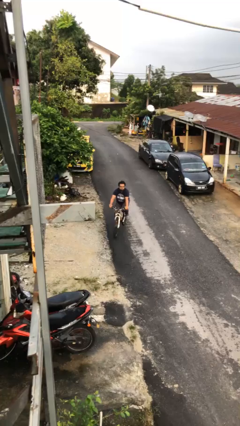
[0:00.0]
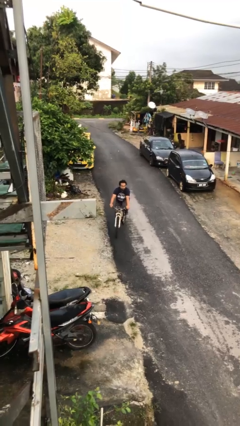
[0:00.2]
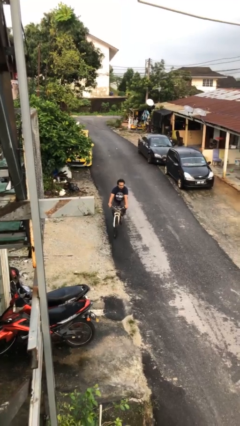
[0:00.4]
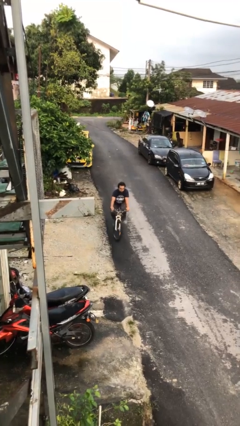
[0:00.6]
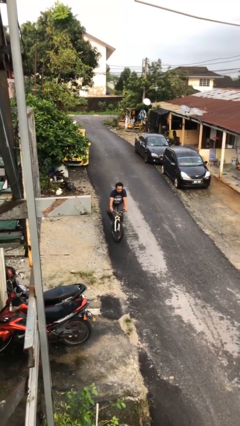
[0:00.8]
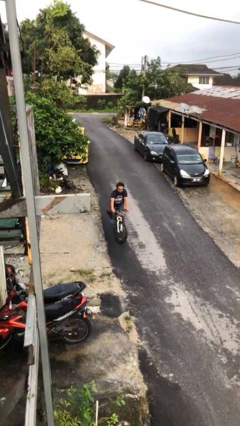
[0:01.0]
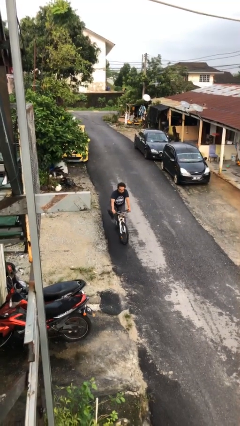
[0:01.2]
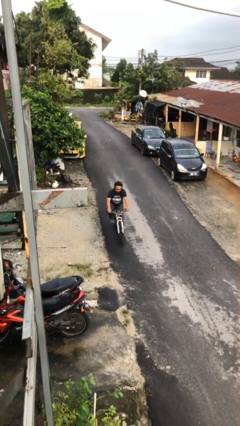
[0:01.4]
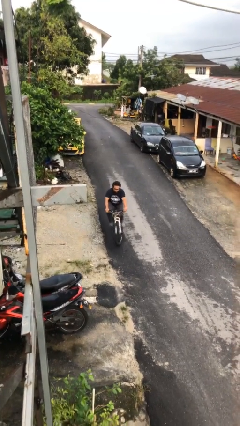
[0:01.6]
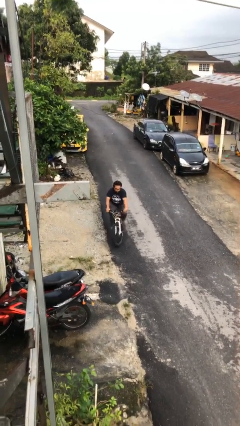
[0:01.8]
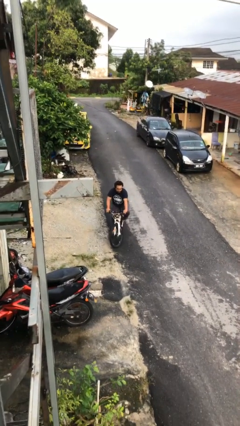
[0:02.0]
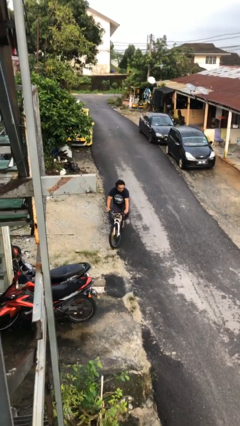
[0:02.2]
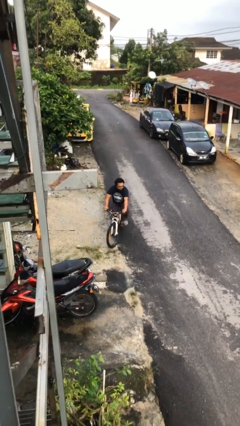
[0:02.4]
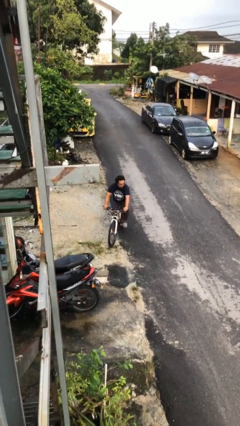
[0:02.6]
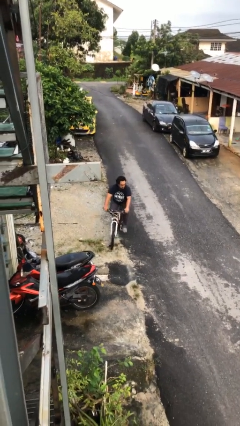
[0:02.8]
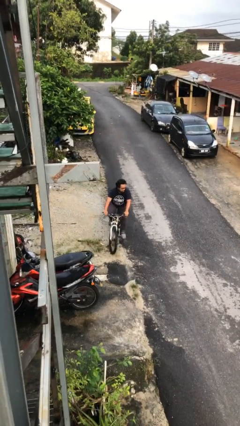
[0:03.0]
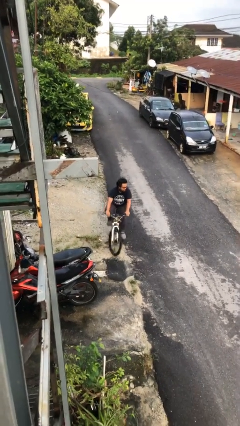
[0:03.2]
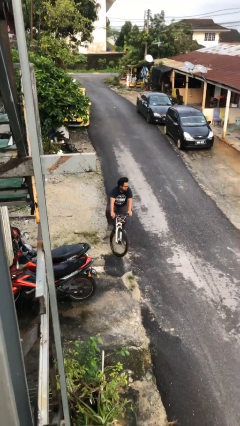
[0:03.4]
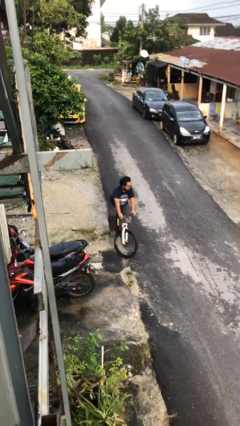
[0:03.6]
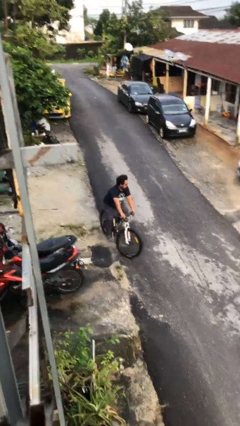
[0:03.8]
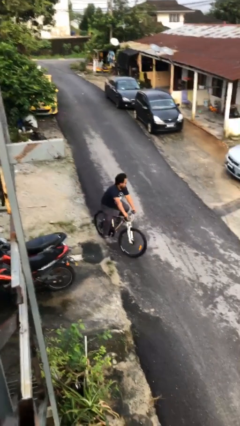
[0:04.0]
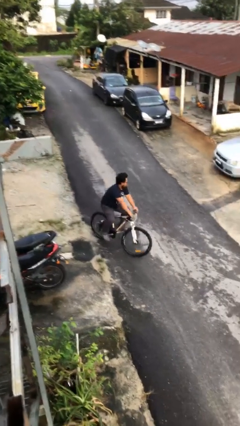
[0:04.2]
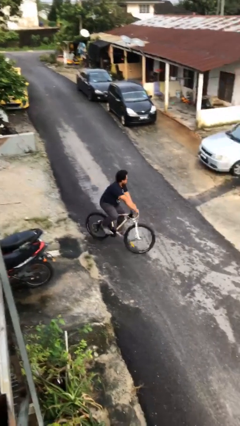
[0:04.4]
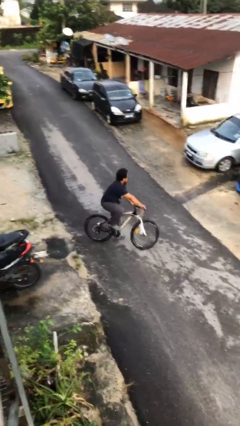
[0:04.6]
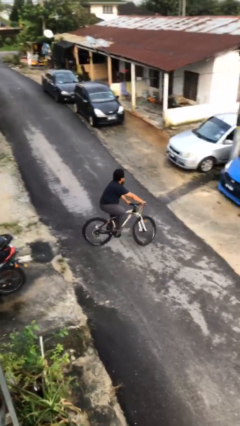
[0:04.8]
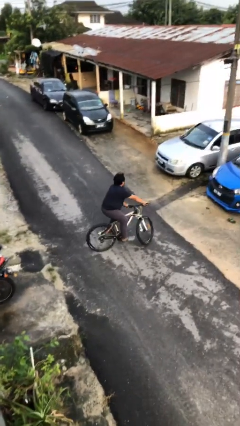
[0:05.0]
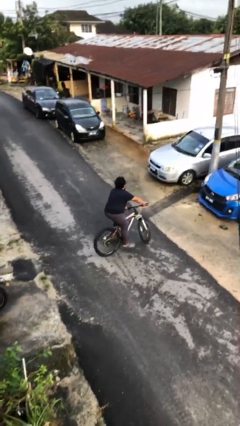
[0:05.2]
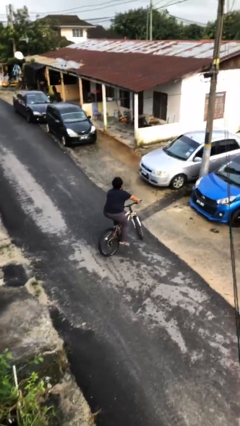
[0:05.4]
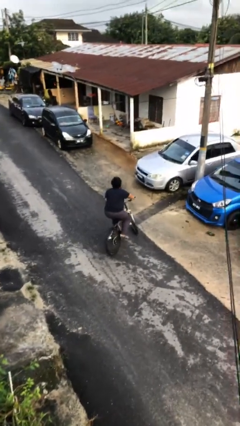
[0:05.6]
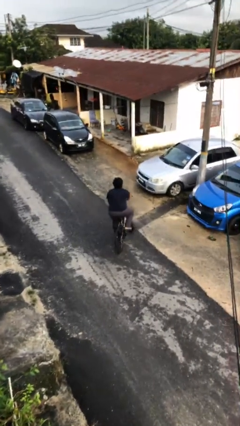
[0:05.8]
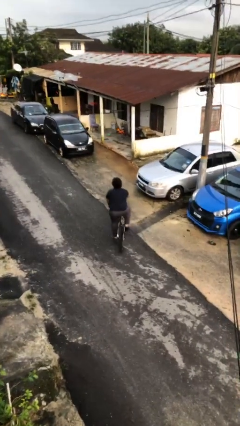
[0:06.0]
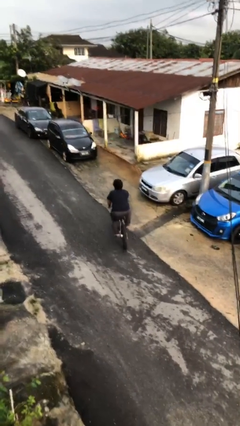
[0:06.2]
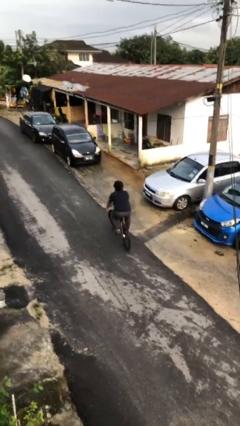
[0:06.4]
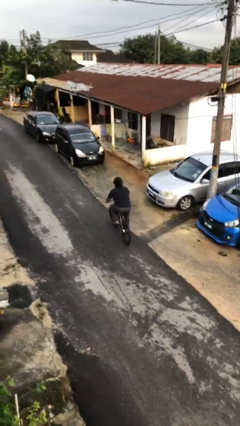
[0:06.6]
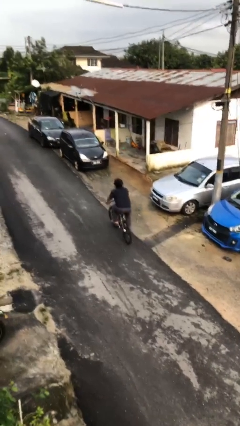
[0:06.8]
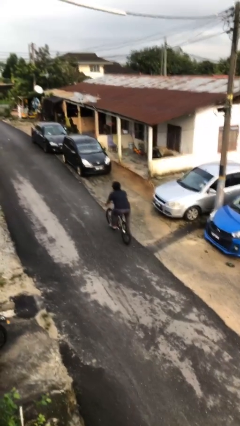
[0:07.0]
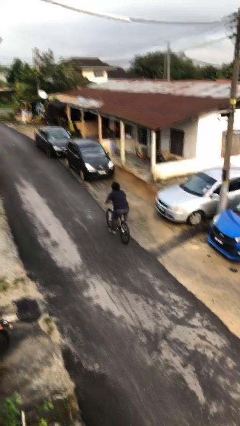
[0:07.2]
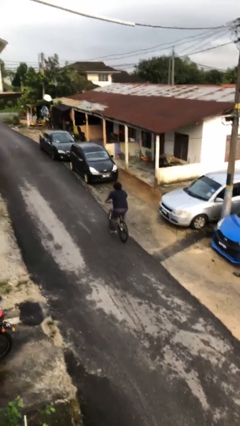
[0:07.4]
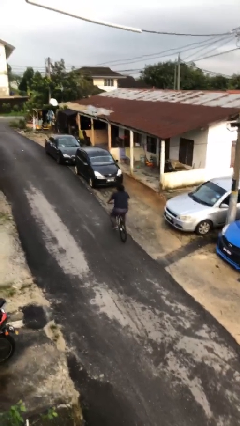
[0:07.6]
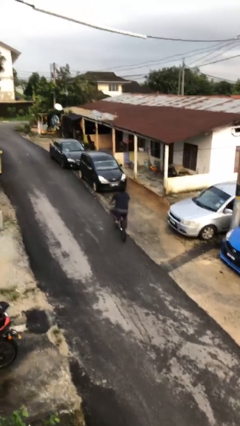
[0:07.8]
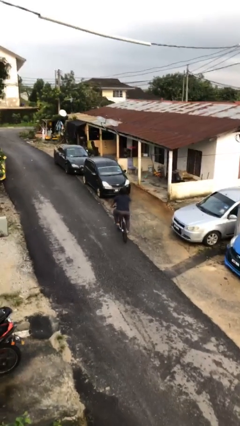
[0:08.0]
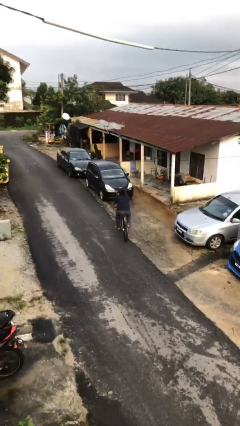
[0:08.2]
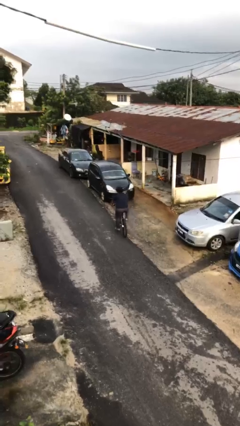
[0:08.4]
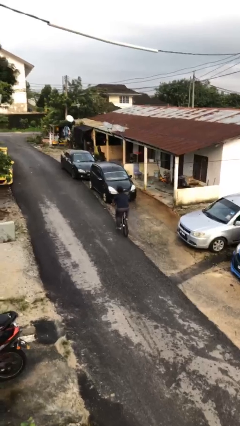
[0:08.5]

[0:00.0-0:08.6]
person rides bicycle

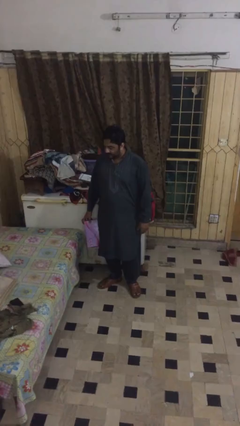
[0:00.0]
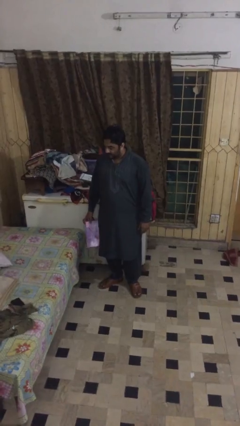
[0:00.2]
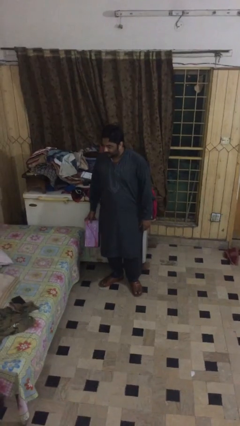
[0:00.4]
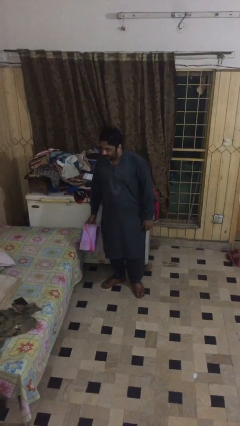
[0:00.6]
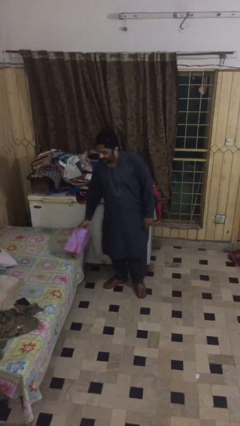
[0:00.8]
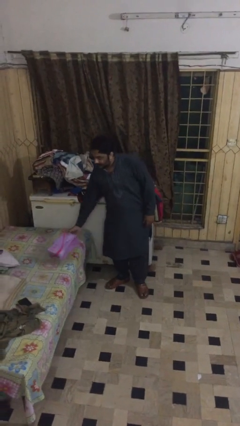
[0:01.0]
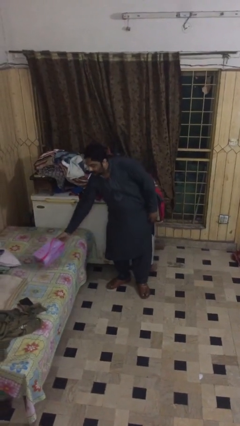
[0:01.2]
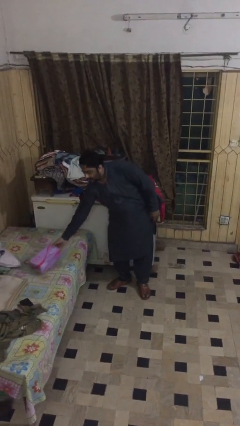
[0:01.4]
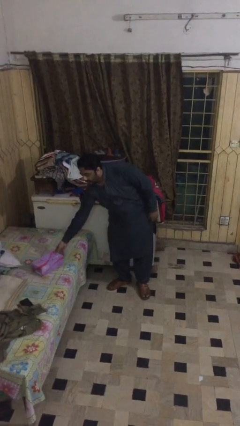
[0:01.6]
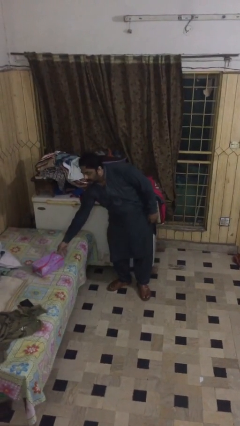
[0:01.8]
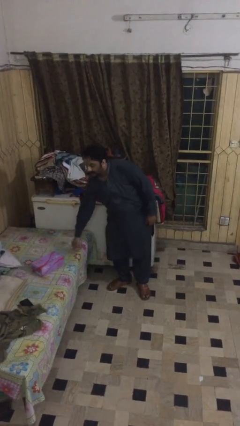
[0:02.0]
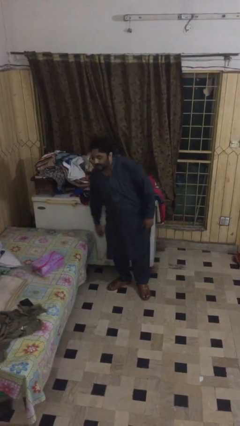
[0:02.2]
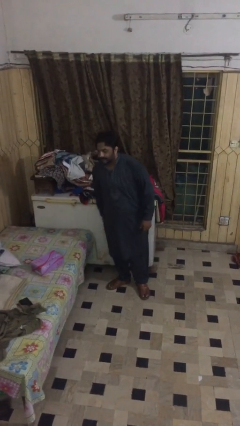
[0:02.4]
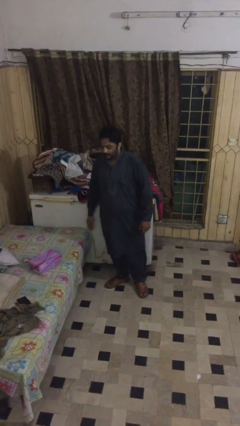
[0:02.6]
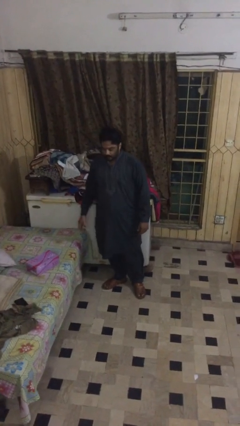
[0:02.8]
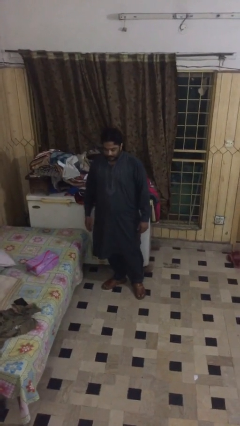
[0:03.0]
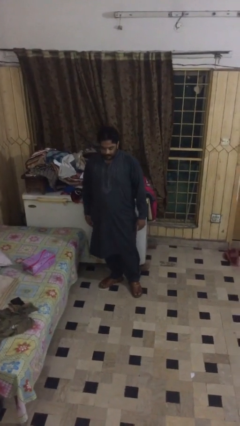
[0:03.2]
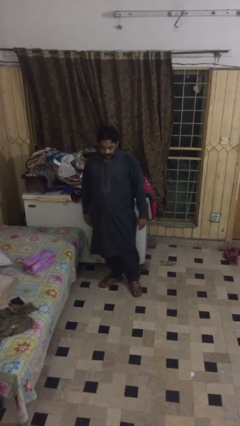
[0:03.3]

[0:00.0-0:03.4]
person puts down object on table

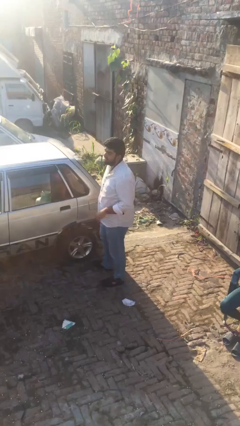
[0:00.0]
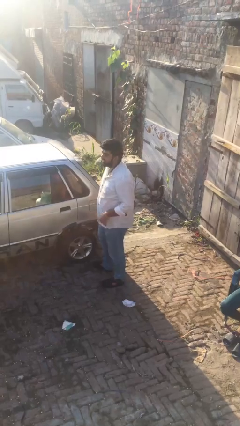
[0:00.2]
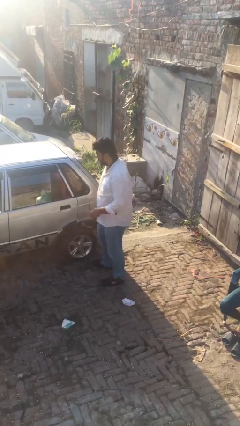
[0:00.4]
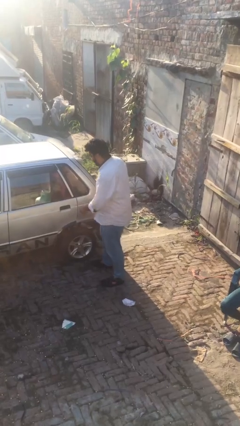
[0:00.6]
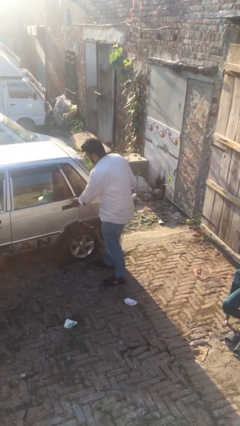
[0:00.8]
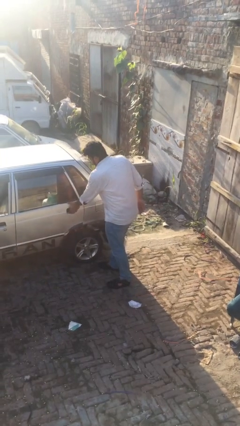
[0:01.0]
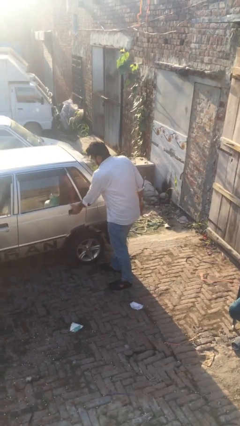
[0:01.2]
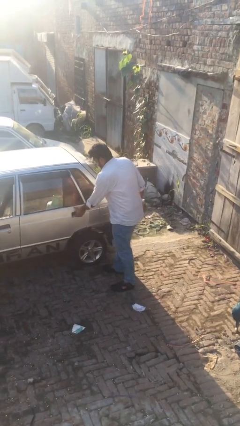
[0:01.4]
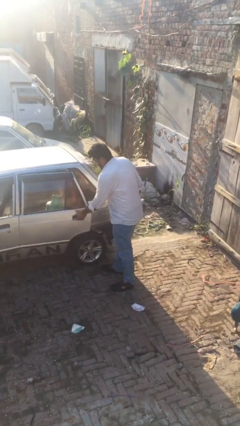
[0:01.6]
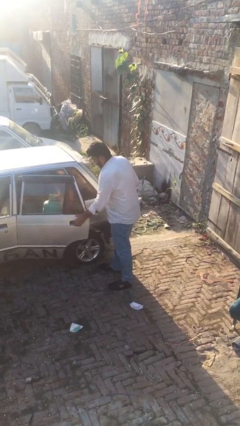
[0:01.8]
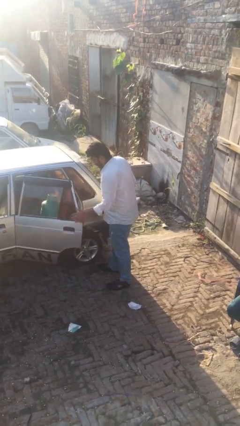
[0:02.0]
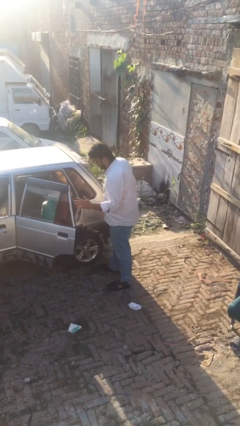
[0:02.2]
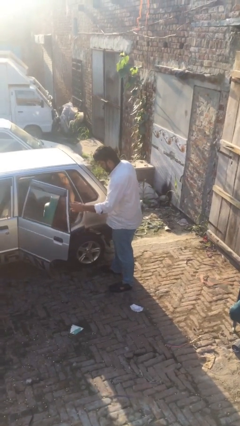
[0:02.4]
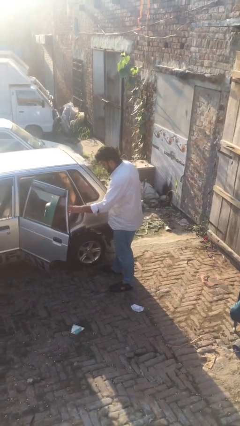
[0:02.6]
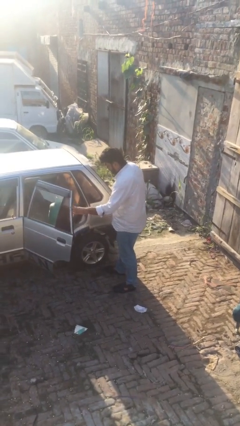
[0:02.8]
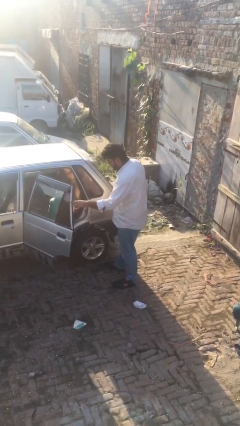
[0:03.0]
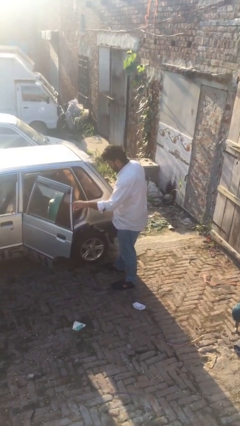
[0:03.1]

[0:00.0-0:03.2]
person opens car door

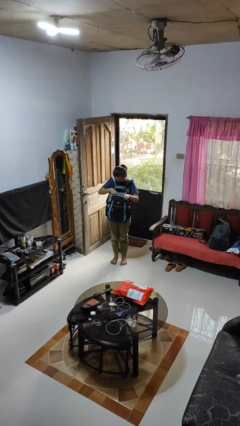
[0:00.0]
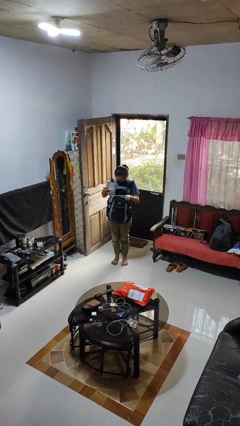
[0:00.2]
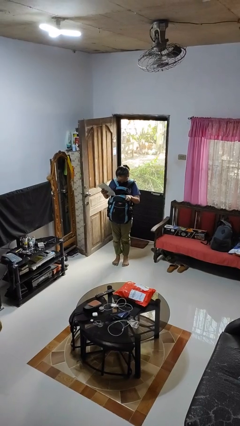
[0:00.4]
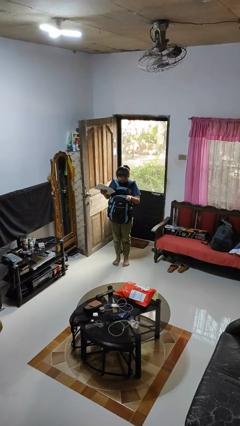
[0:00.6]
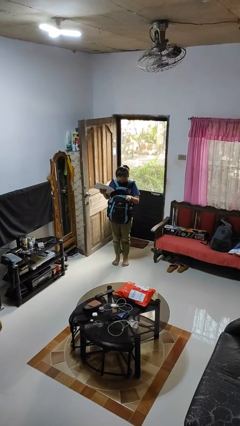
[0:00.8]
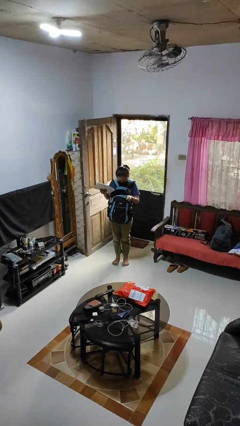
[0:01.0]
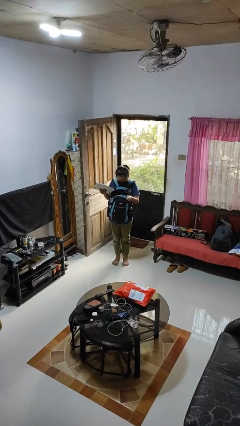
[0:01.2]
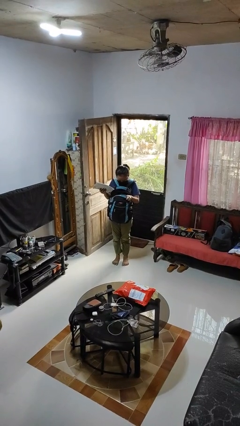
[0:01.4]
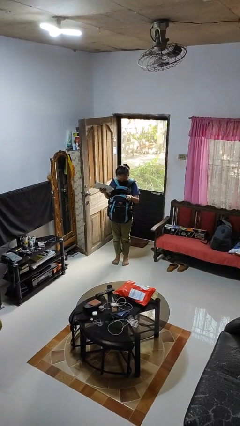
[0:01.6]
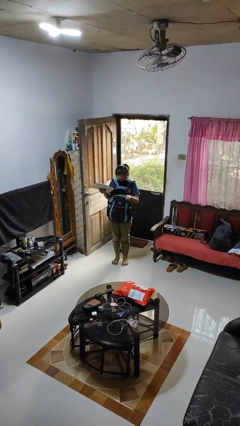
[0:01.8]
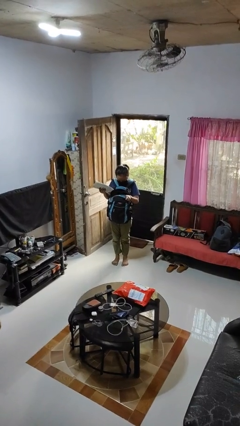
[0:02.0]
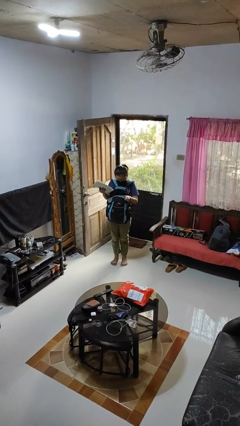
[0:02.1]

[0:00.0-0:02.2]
person takes object from backpack

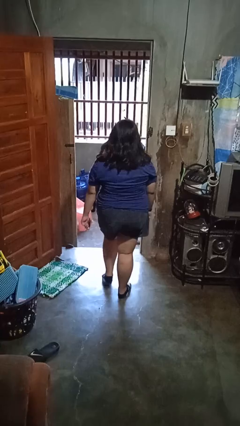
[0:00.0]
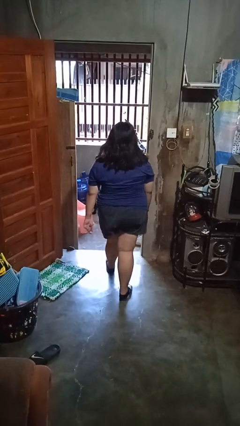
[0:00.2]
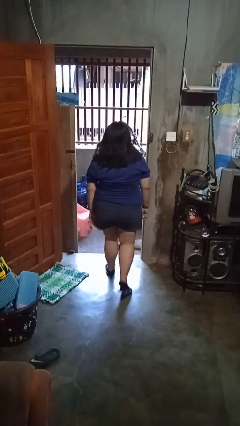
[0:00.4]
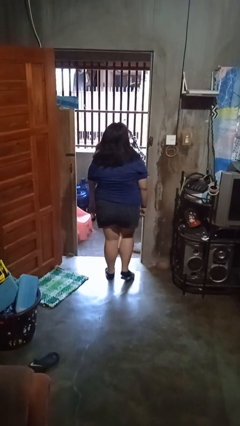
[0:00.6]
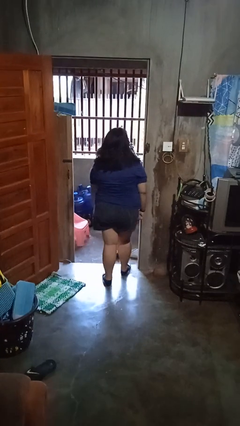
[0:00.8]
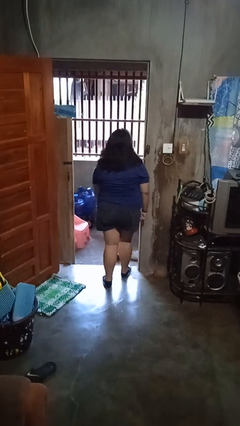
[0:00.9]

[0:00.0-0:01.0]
person bumps into wall
